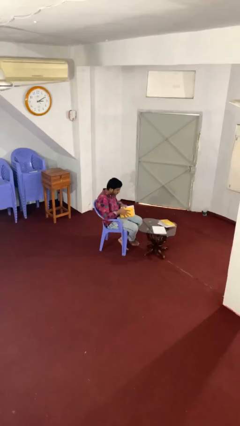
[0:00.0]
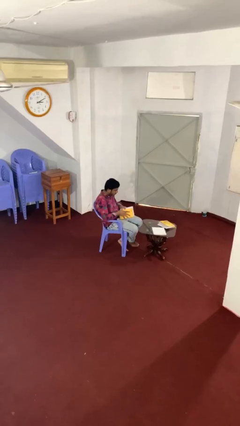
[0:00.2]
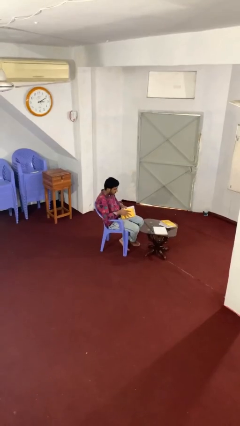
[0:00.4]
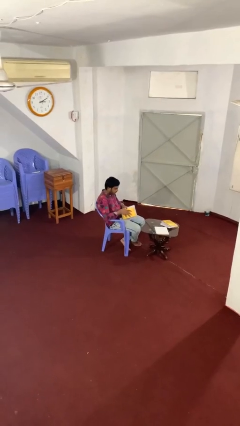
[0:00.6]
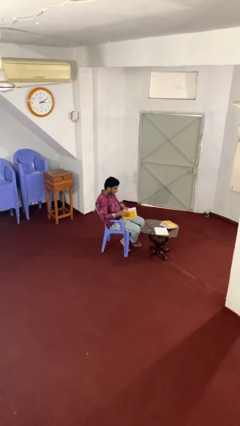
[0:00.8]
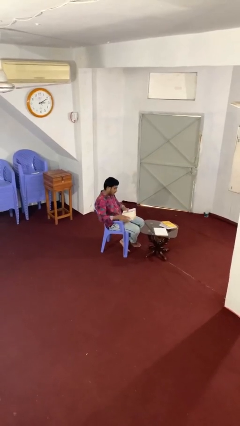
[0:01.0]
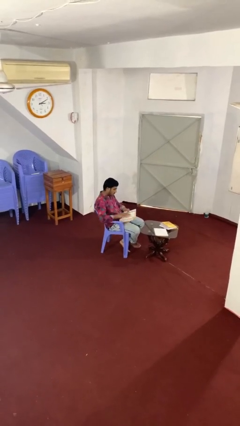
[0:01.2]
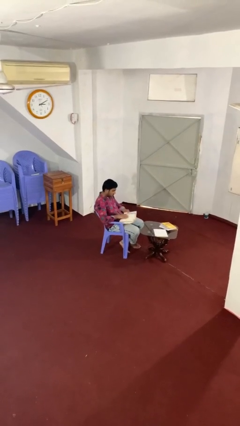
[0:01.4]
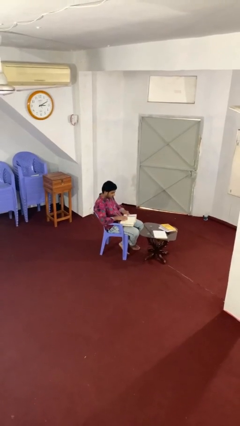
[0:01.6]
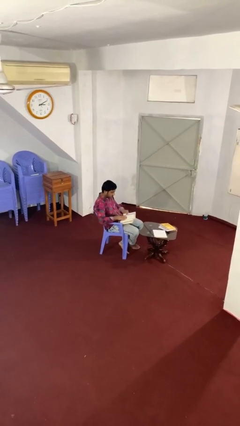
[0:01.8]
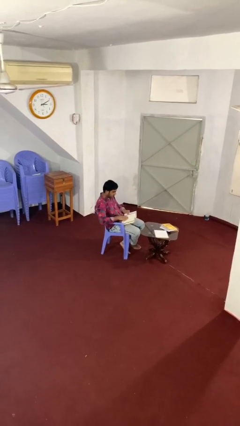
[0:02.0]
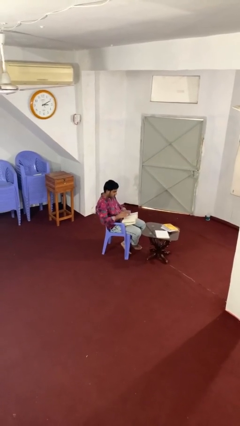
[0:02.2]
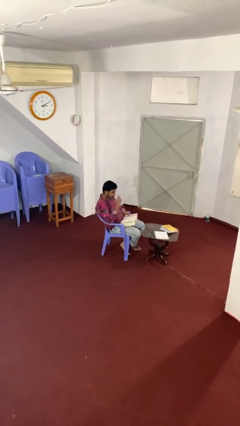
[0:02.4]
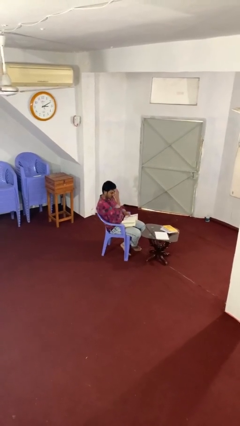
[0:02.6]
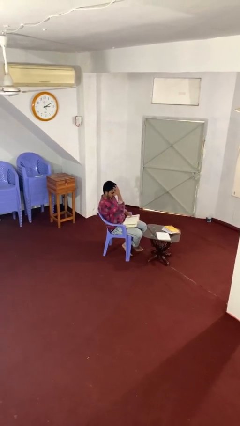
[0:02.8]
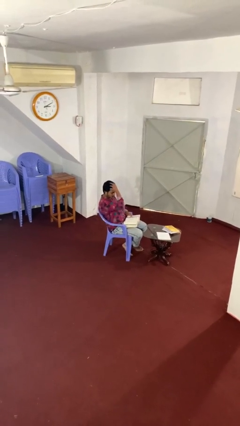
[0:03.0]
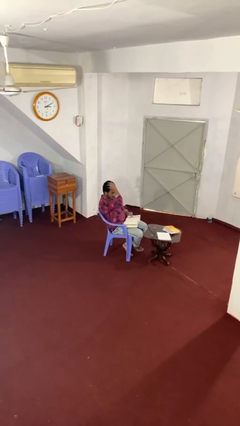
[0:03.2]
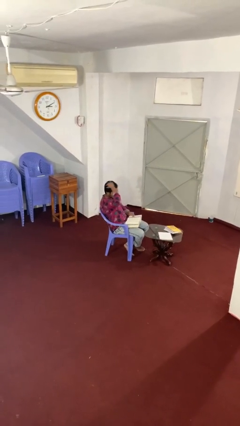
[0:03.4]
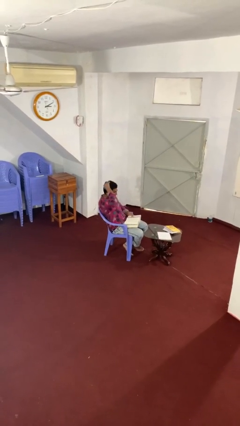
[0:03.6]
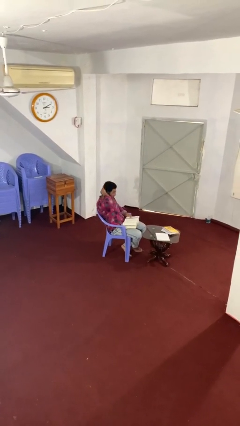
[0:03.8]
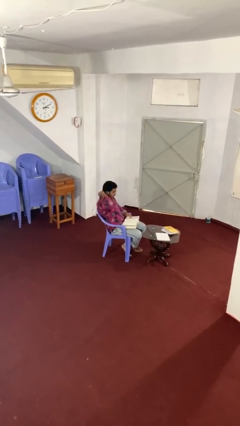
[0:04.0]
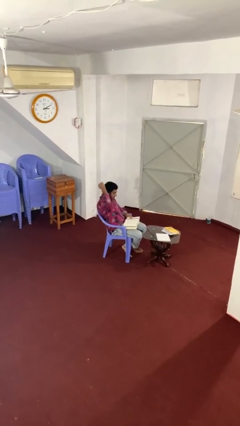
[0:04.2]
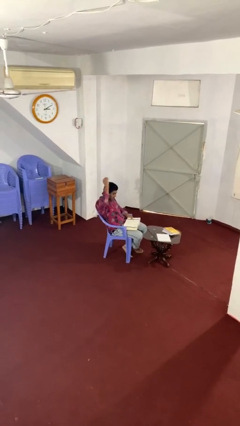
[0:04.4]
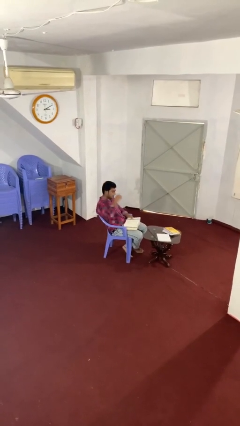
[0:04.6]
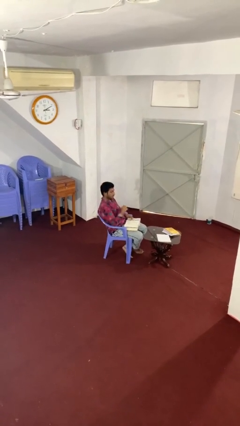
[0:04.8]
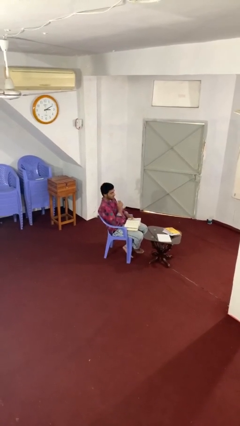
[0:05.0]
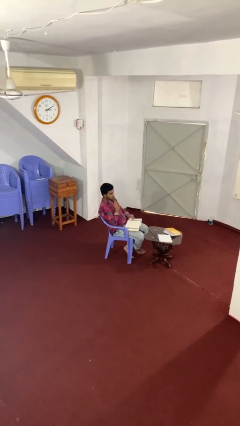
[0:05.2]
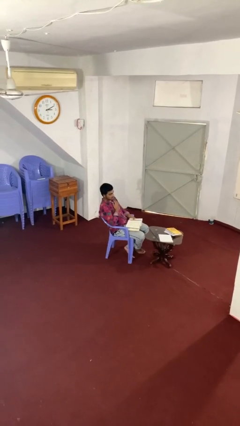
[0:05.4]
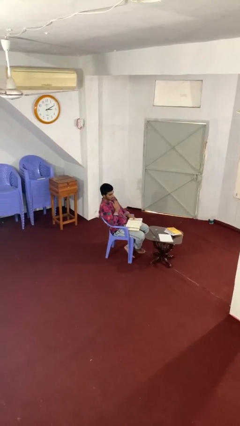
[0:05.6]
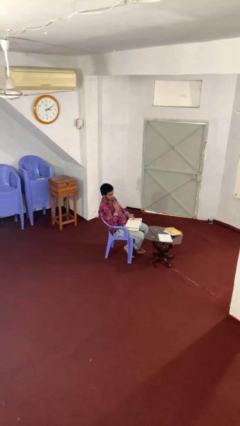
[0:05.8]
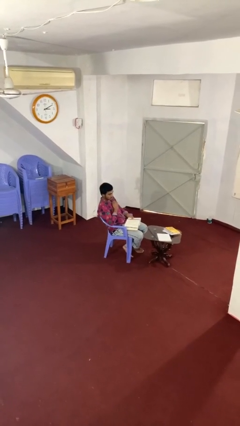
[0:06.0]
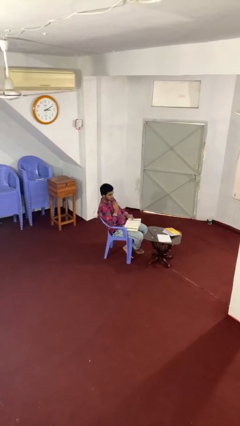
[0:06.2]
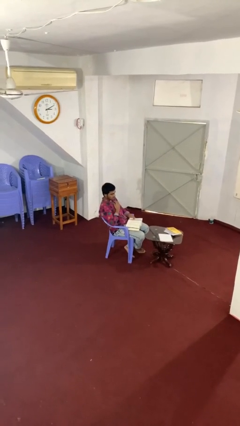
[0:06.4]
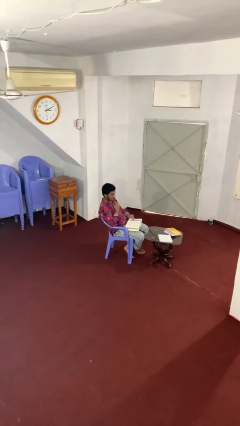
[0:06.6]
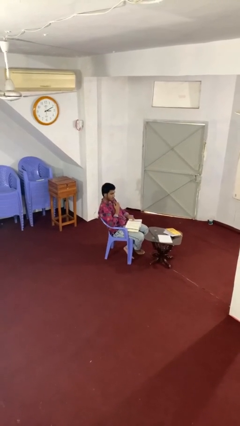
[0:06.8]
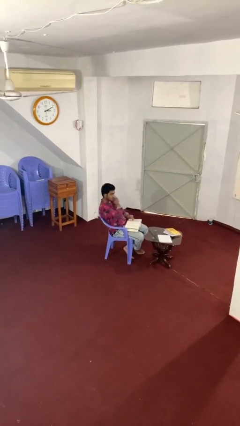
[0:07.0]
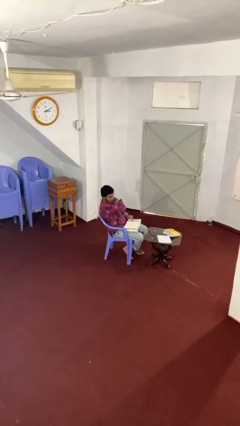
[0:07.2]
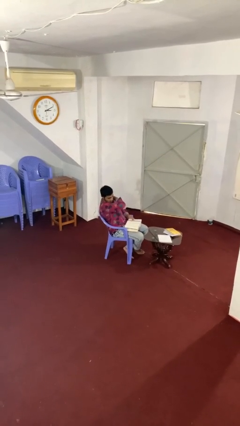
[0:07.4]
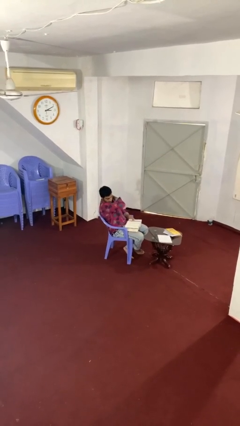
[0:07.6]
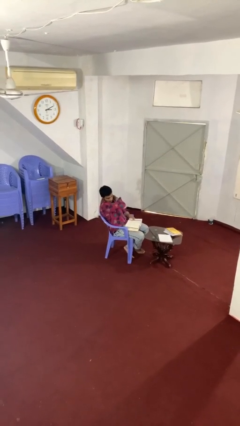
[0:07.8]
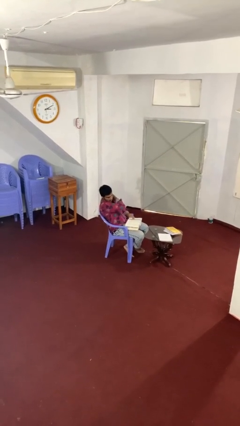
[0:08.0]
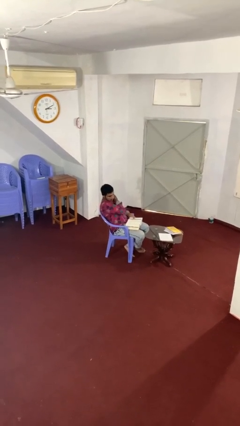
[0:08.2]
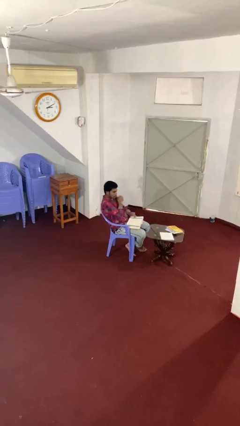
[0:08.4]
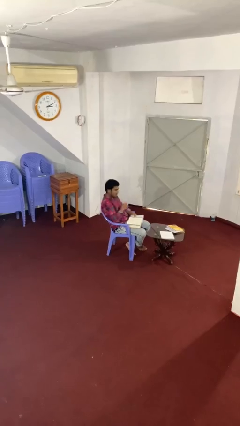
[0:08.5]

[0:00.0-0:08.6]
person reads document

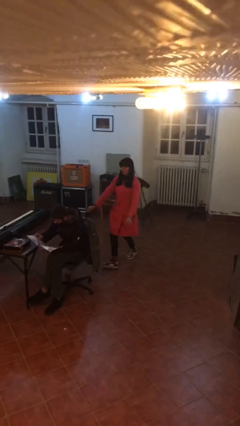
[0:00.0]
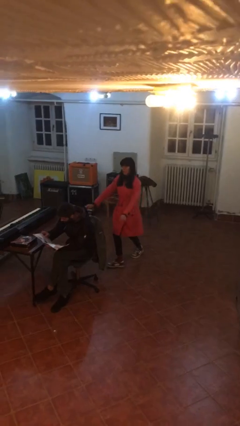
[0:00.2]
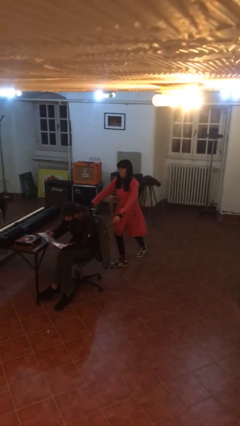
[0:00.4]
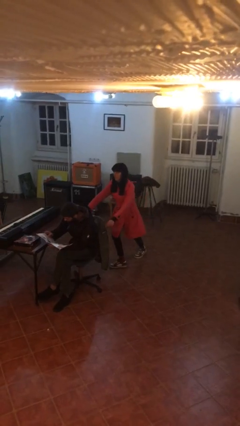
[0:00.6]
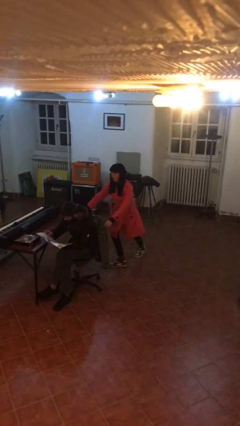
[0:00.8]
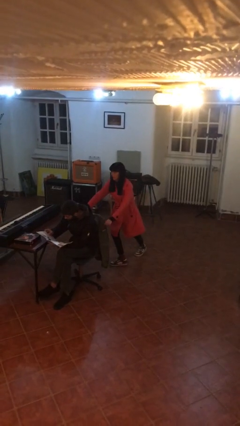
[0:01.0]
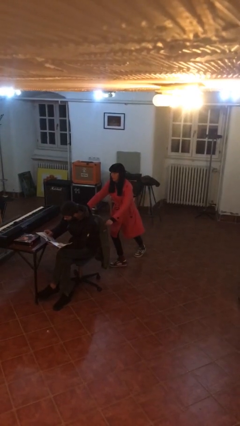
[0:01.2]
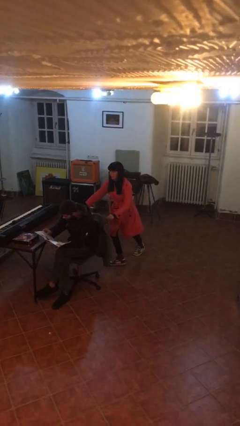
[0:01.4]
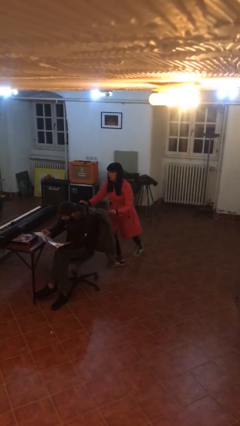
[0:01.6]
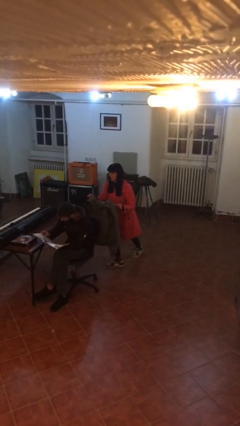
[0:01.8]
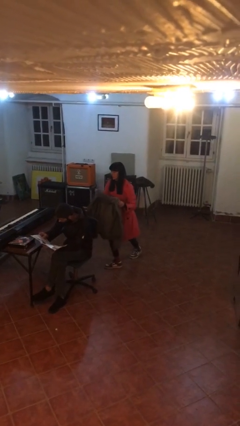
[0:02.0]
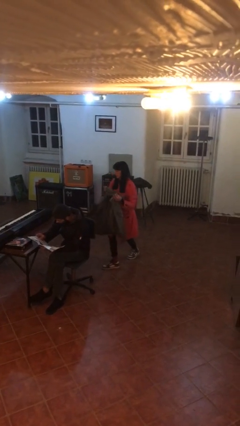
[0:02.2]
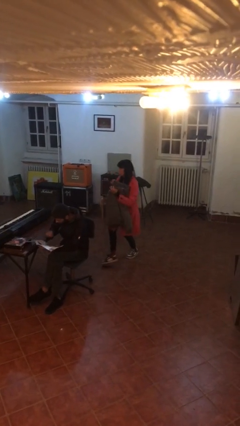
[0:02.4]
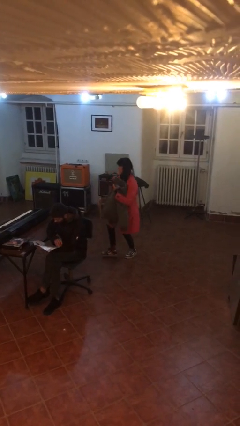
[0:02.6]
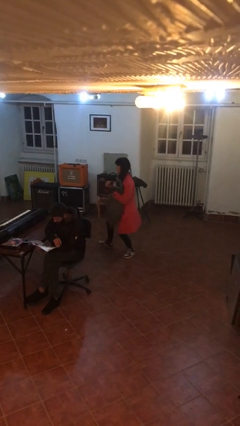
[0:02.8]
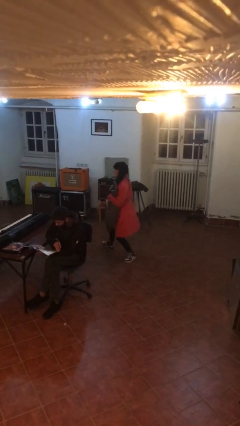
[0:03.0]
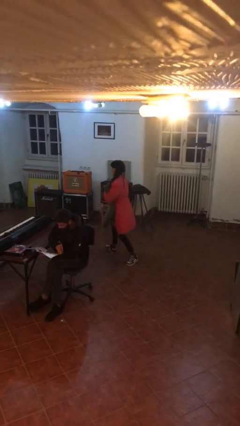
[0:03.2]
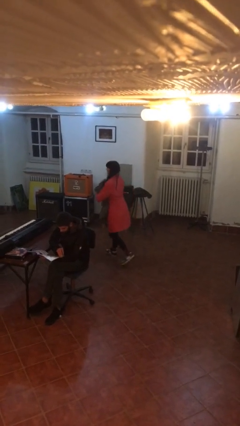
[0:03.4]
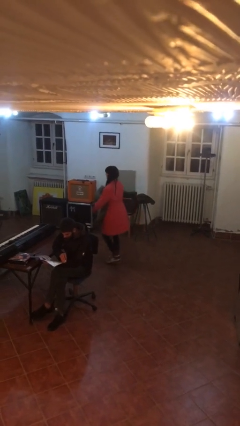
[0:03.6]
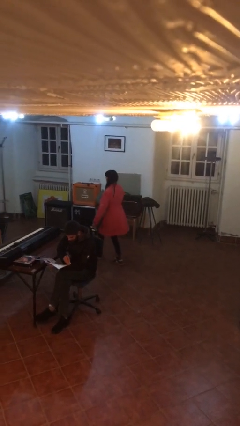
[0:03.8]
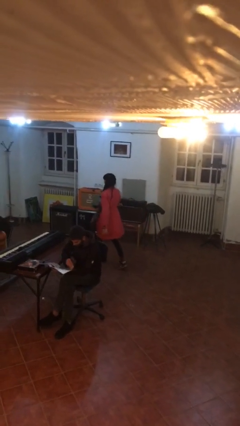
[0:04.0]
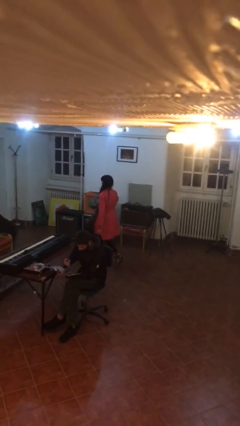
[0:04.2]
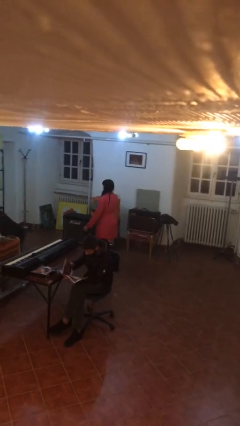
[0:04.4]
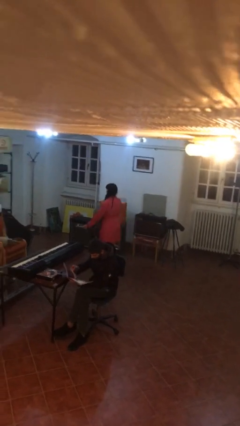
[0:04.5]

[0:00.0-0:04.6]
person steals object from person

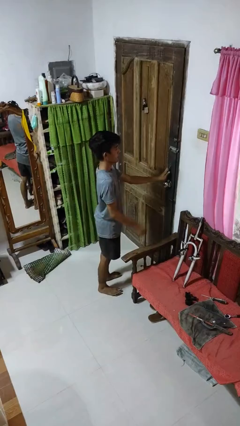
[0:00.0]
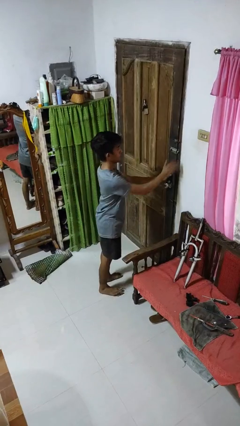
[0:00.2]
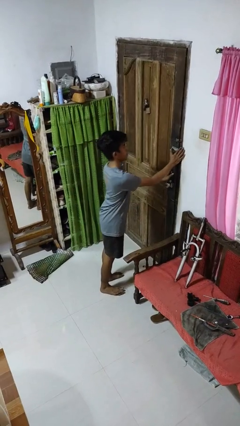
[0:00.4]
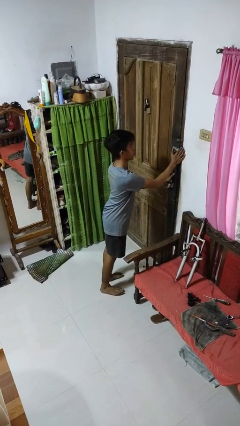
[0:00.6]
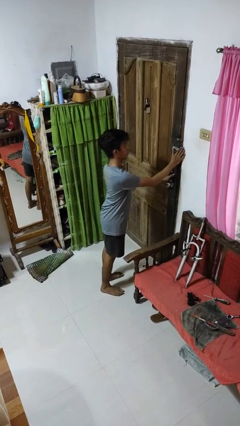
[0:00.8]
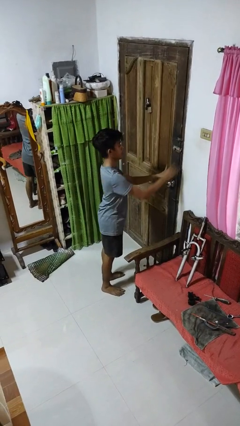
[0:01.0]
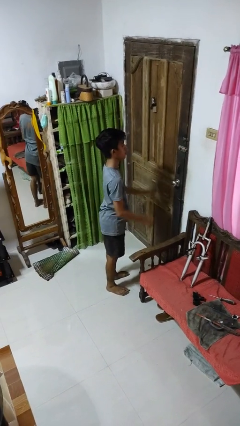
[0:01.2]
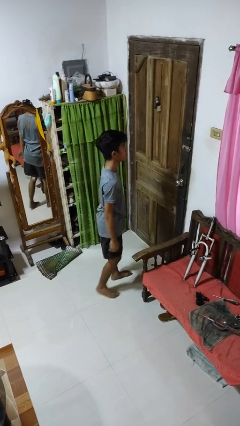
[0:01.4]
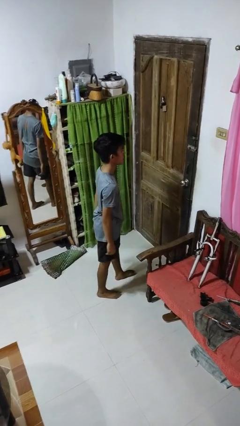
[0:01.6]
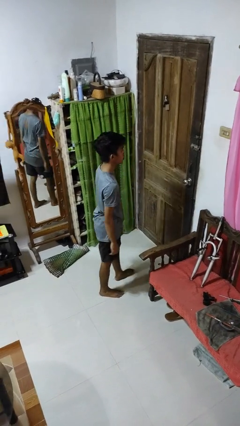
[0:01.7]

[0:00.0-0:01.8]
person locks door with keys

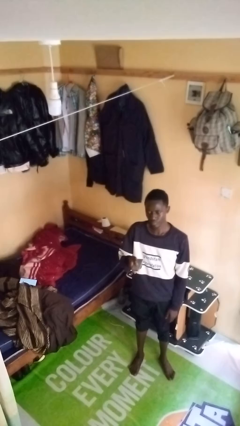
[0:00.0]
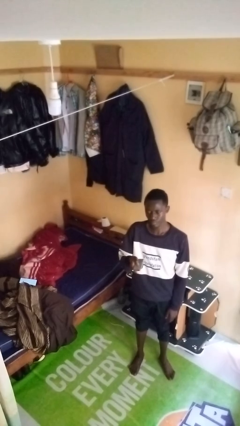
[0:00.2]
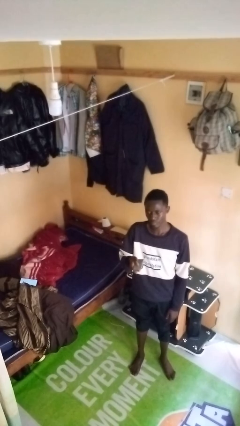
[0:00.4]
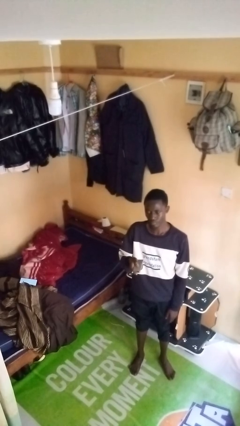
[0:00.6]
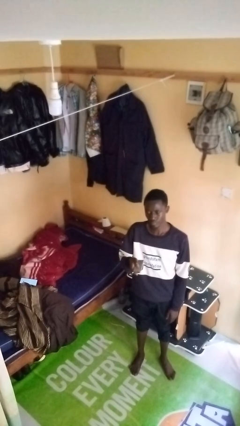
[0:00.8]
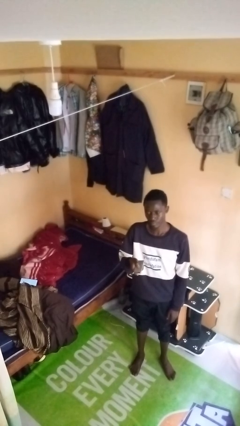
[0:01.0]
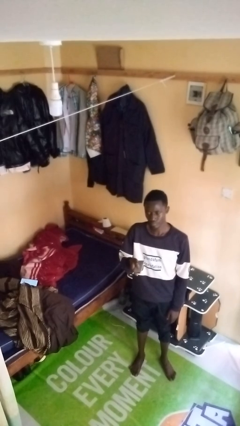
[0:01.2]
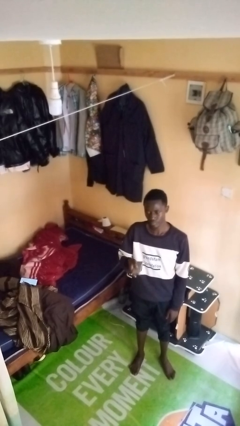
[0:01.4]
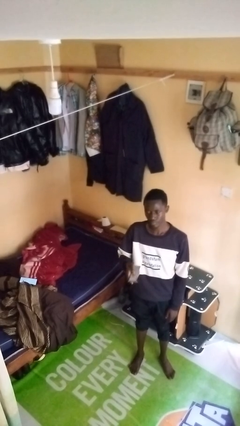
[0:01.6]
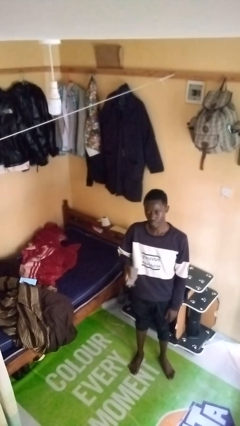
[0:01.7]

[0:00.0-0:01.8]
person uses television remote

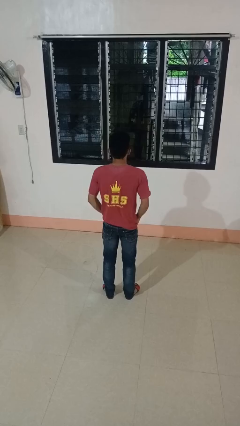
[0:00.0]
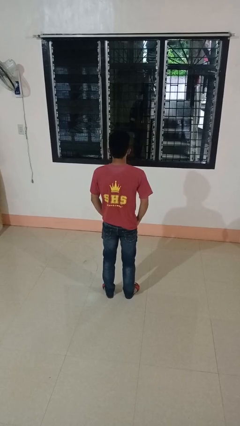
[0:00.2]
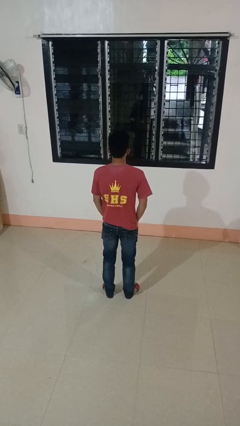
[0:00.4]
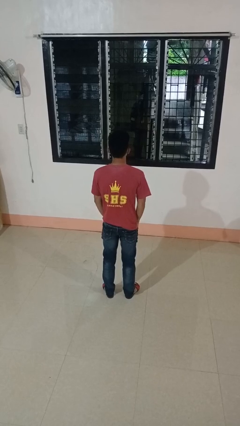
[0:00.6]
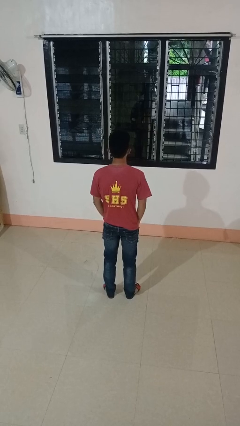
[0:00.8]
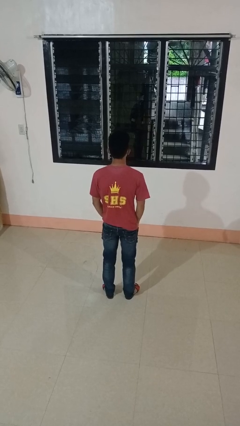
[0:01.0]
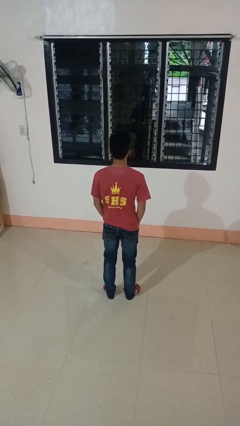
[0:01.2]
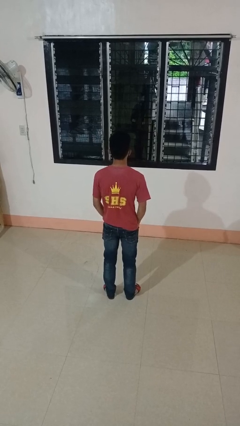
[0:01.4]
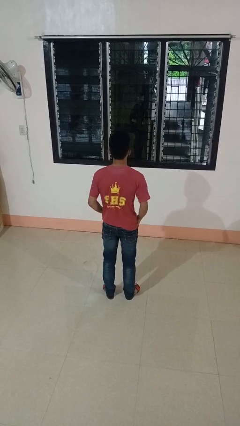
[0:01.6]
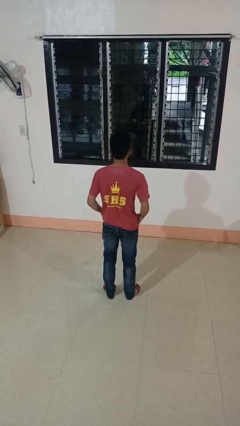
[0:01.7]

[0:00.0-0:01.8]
person puts hands in back pockets
